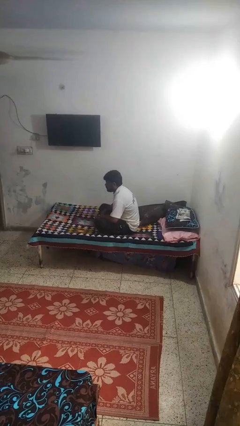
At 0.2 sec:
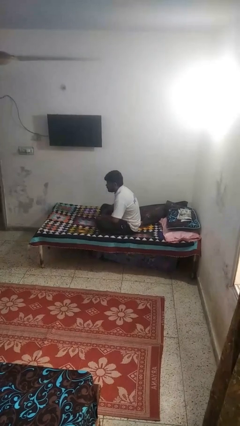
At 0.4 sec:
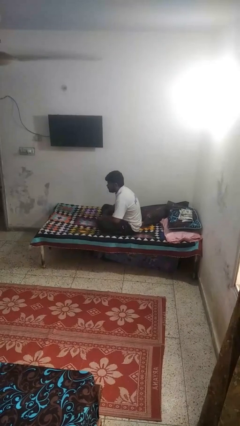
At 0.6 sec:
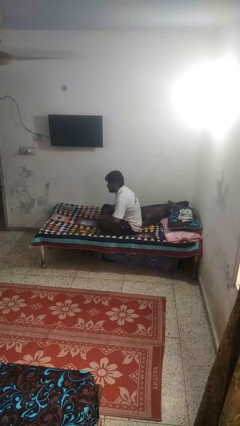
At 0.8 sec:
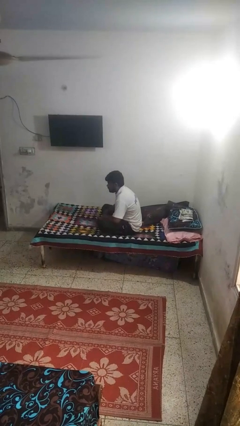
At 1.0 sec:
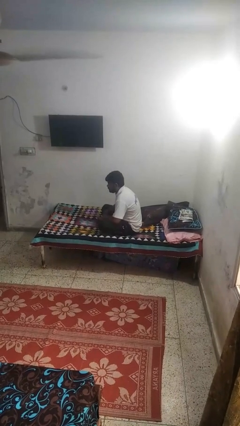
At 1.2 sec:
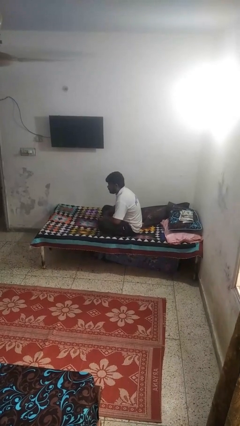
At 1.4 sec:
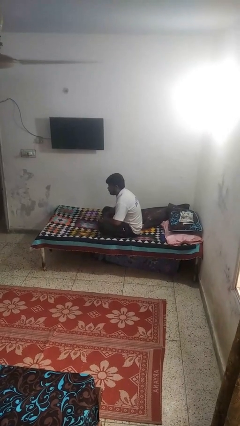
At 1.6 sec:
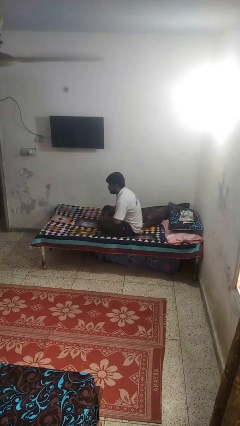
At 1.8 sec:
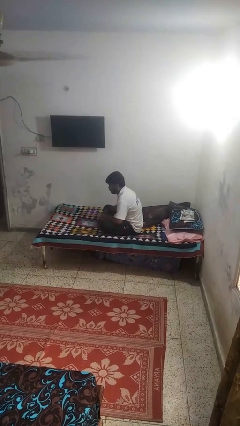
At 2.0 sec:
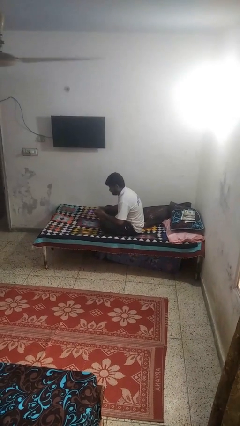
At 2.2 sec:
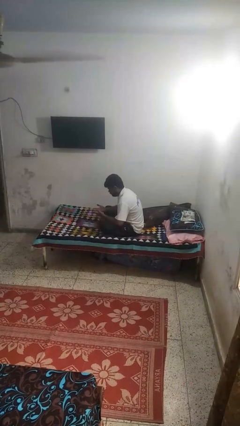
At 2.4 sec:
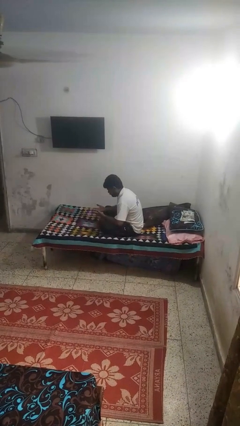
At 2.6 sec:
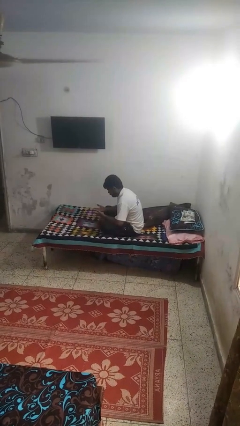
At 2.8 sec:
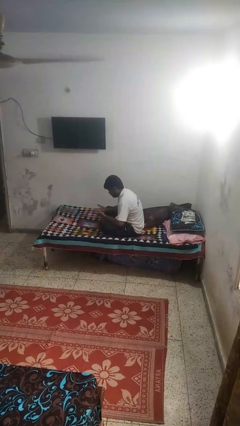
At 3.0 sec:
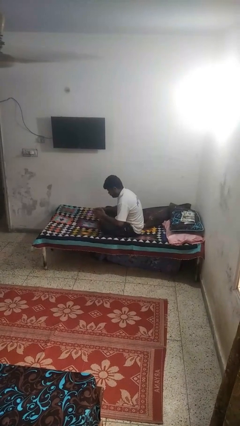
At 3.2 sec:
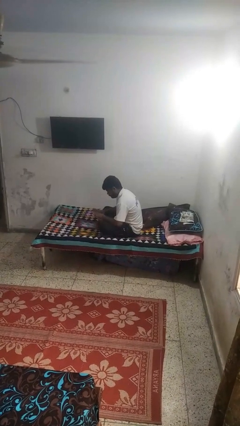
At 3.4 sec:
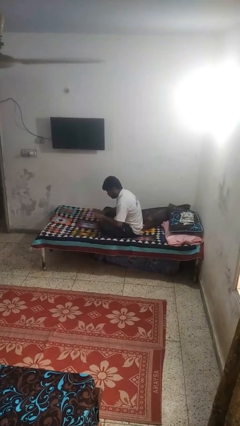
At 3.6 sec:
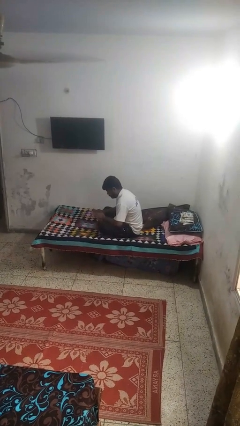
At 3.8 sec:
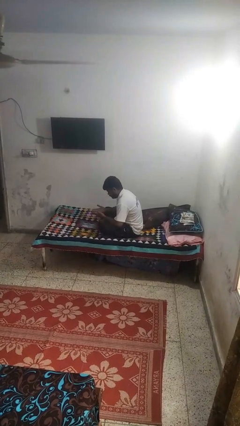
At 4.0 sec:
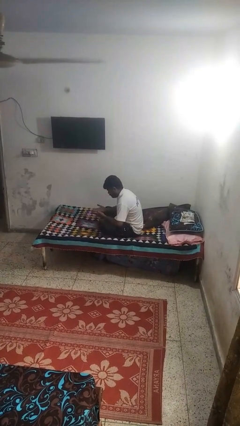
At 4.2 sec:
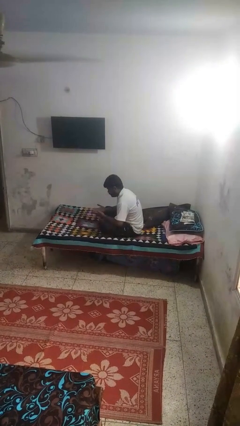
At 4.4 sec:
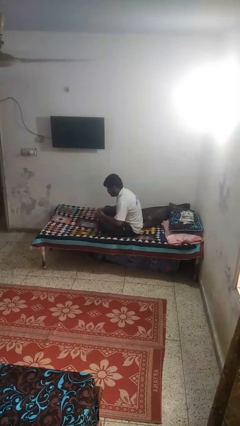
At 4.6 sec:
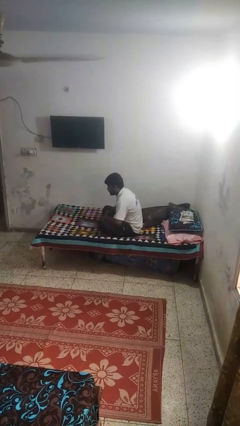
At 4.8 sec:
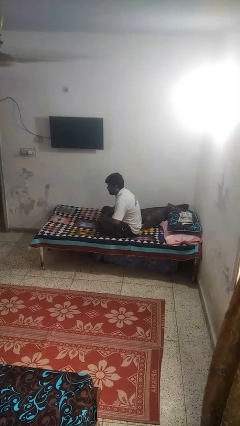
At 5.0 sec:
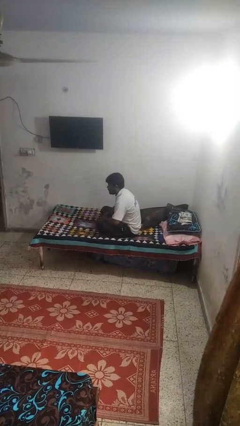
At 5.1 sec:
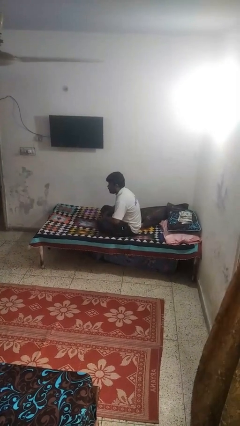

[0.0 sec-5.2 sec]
person looks at hands in lap

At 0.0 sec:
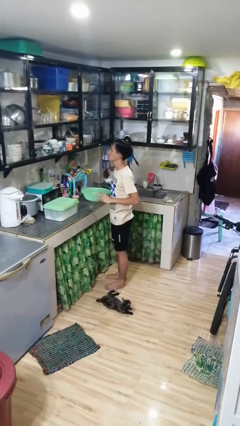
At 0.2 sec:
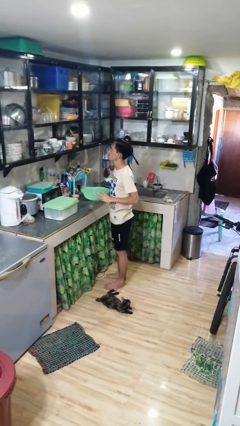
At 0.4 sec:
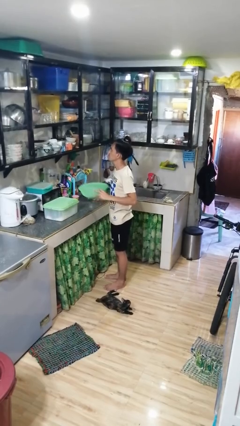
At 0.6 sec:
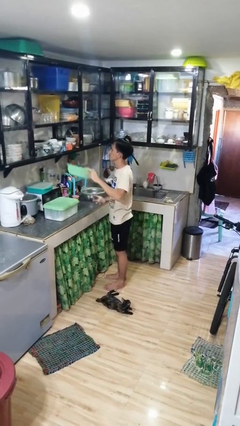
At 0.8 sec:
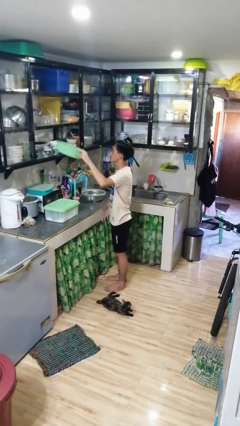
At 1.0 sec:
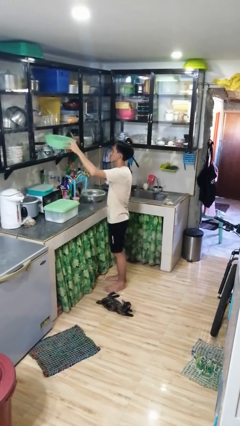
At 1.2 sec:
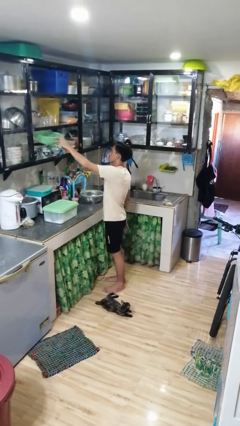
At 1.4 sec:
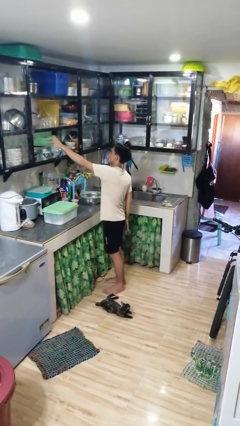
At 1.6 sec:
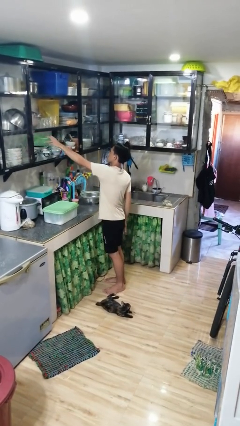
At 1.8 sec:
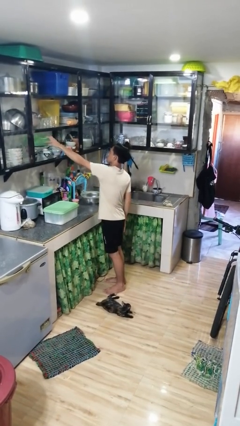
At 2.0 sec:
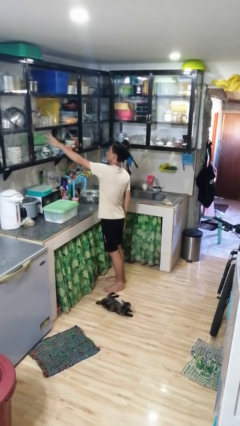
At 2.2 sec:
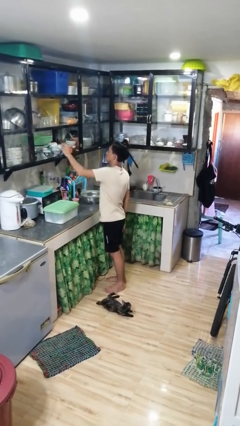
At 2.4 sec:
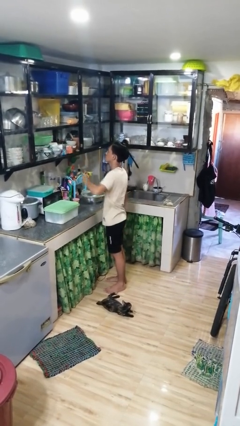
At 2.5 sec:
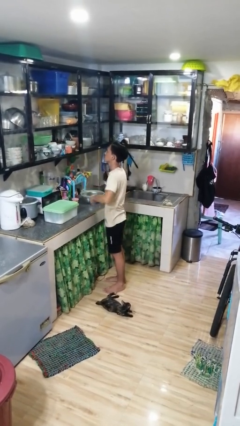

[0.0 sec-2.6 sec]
person puts down object into cabinet

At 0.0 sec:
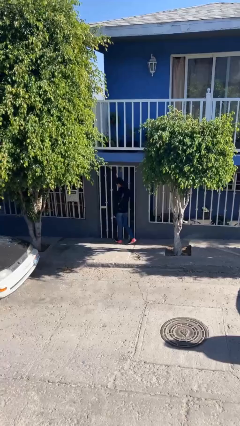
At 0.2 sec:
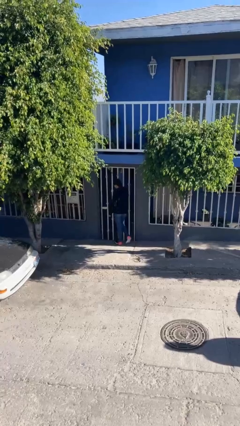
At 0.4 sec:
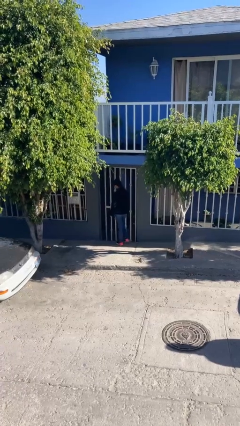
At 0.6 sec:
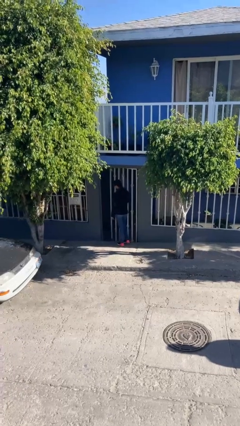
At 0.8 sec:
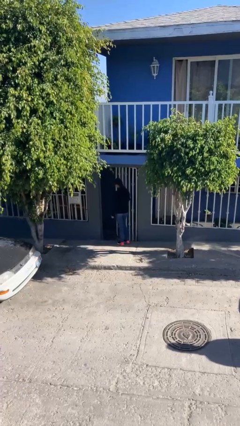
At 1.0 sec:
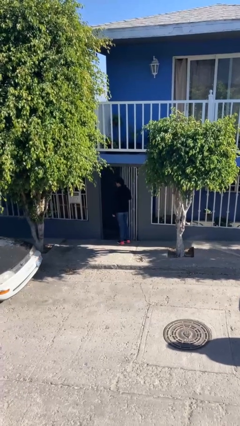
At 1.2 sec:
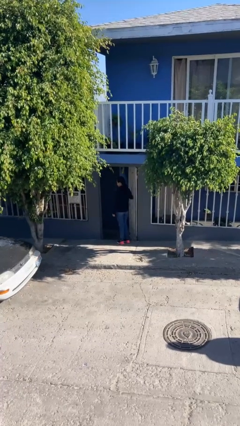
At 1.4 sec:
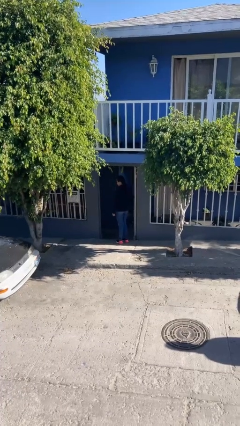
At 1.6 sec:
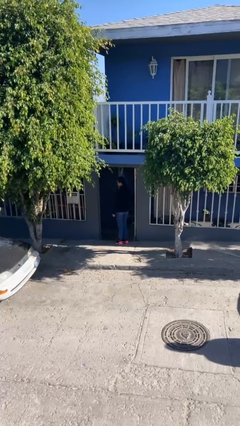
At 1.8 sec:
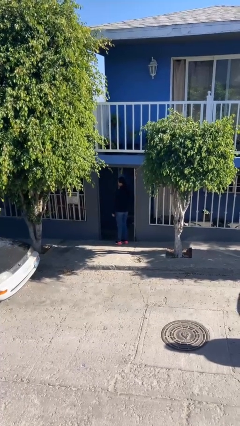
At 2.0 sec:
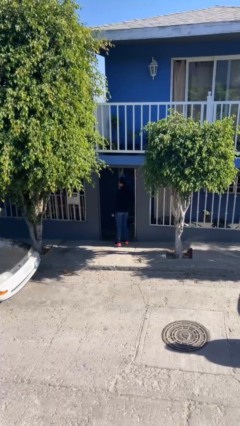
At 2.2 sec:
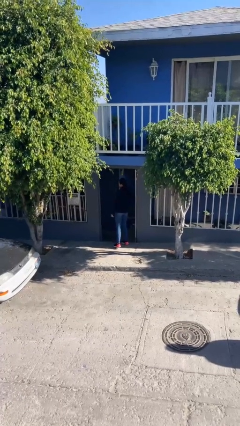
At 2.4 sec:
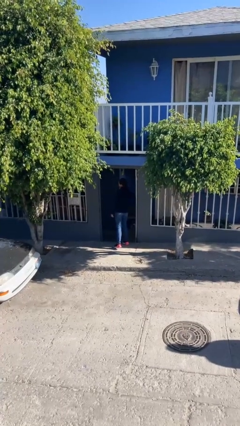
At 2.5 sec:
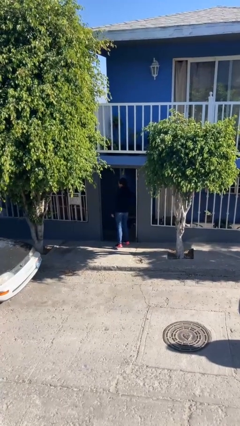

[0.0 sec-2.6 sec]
person opens facility door

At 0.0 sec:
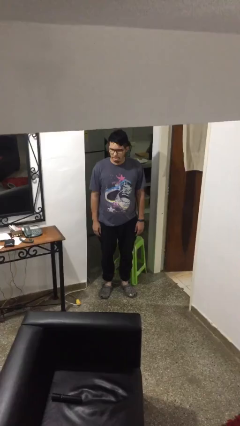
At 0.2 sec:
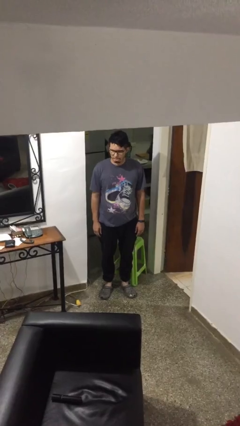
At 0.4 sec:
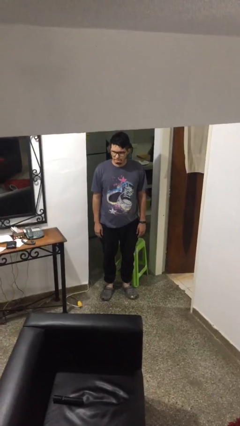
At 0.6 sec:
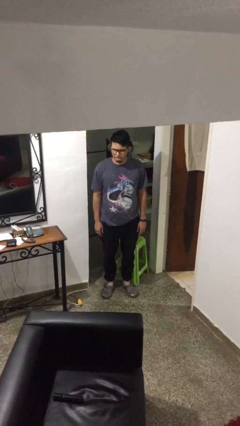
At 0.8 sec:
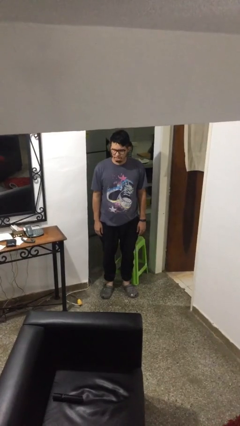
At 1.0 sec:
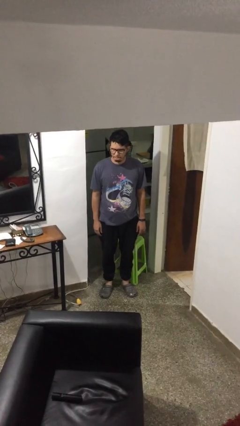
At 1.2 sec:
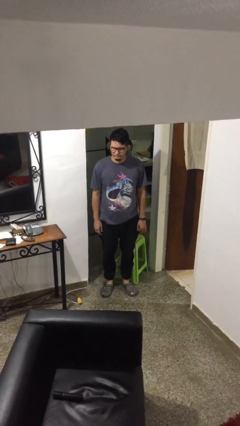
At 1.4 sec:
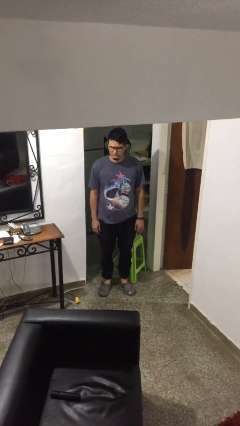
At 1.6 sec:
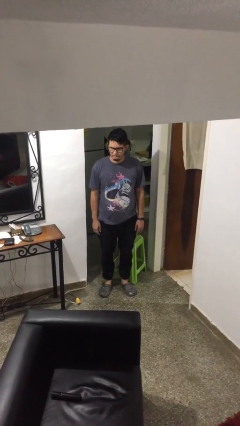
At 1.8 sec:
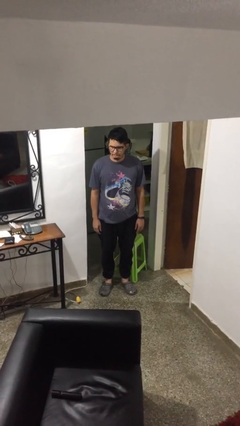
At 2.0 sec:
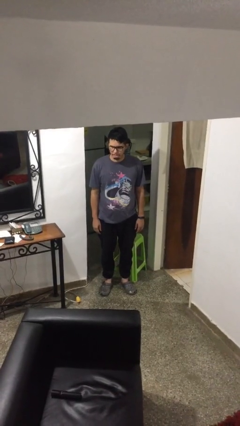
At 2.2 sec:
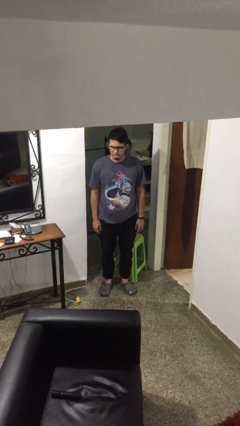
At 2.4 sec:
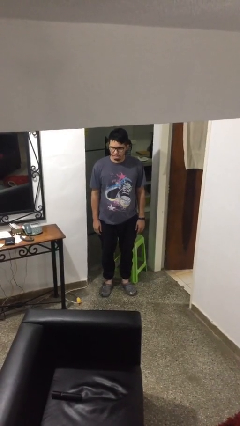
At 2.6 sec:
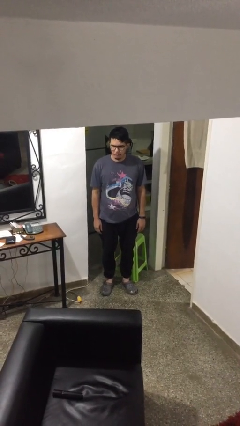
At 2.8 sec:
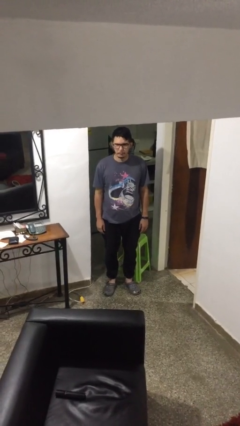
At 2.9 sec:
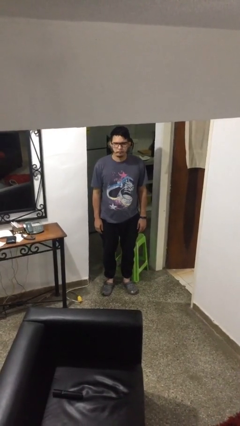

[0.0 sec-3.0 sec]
person sticks out tongue

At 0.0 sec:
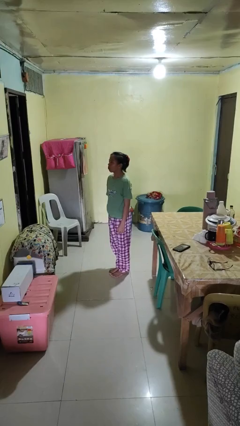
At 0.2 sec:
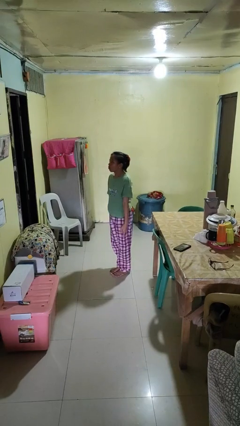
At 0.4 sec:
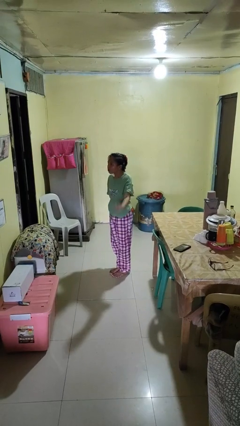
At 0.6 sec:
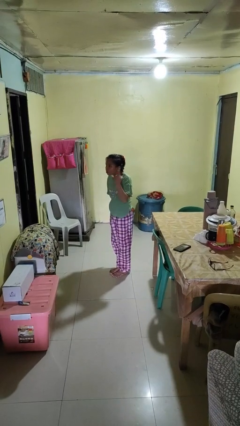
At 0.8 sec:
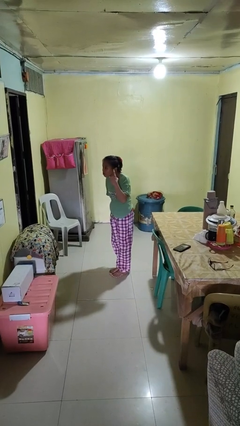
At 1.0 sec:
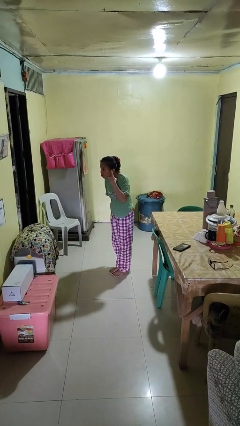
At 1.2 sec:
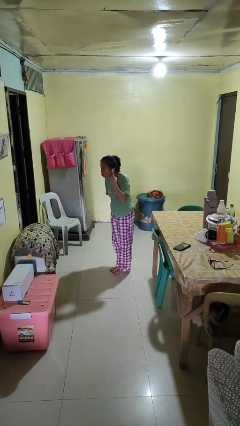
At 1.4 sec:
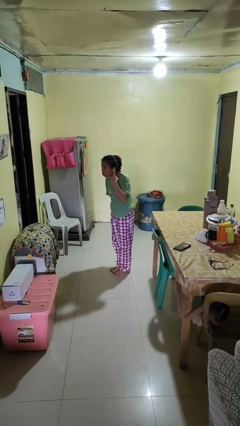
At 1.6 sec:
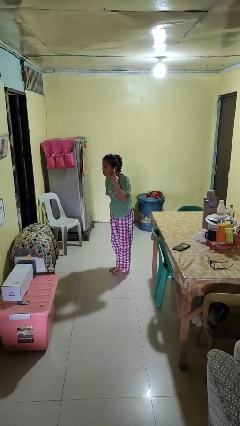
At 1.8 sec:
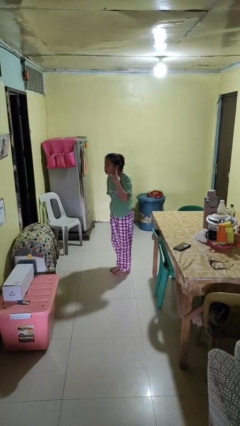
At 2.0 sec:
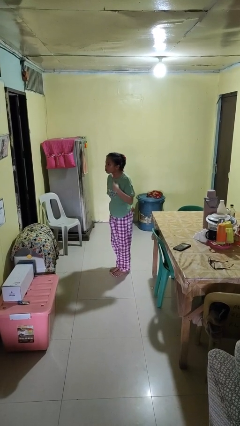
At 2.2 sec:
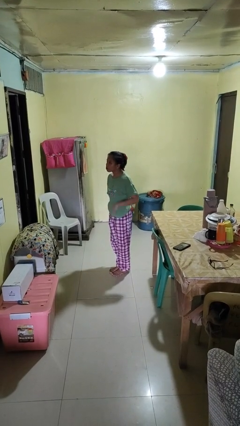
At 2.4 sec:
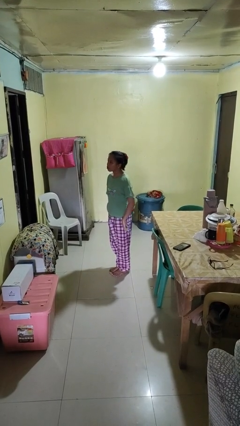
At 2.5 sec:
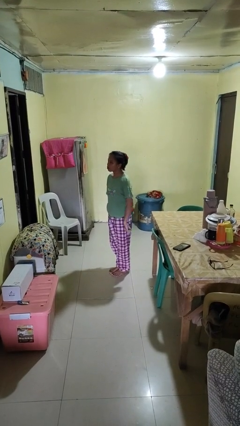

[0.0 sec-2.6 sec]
person gestures listen closely

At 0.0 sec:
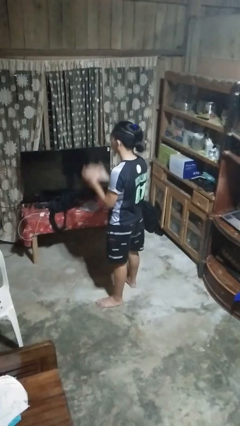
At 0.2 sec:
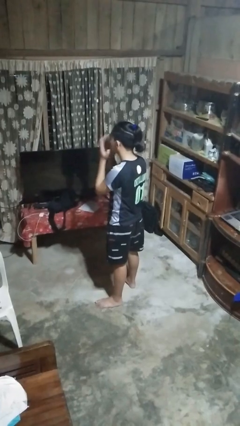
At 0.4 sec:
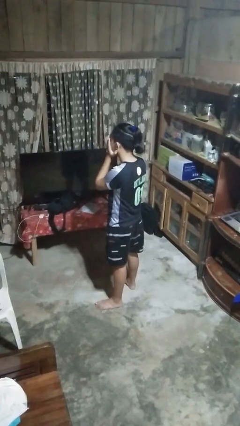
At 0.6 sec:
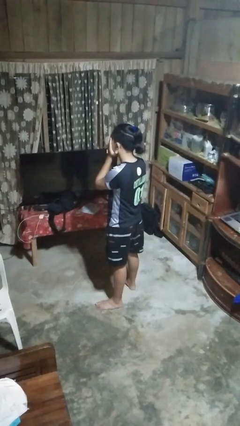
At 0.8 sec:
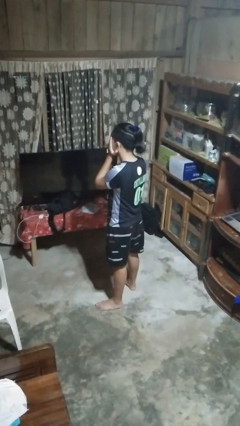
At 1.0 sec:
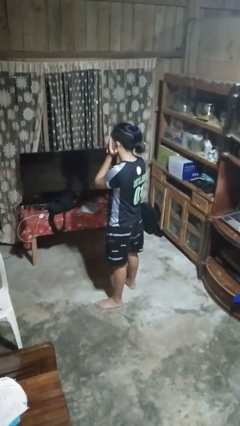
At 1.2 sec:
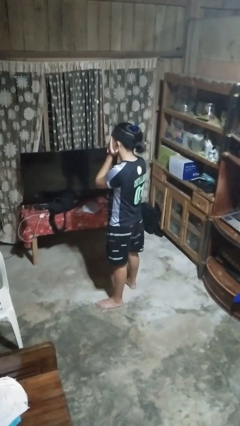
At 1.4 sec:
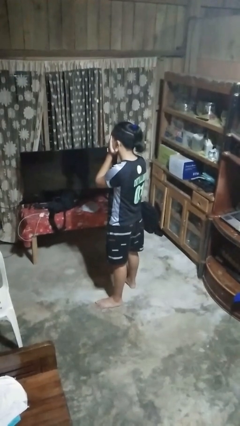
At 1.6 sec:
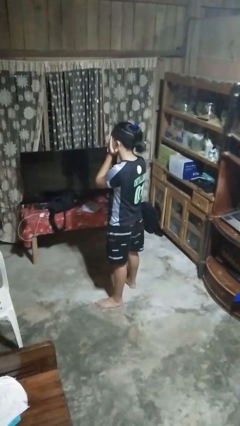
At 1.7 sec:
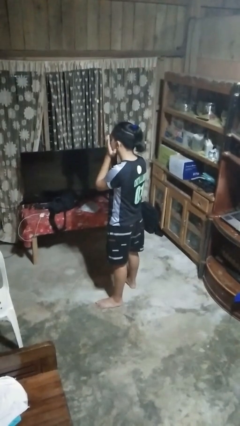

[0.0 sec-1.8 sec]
person covers face with hands
